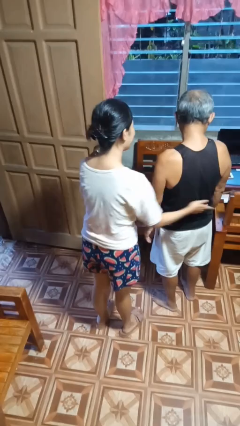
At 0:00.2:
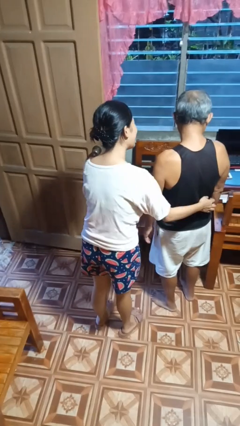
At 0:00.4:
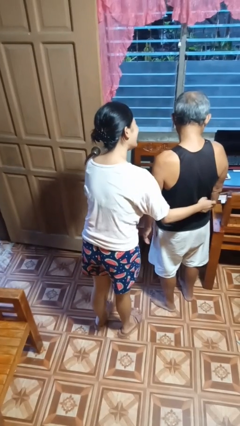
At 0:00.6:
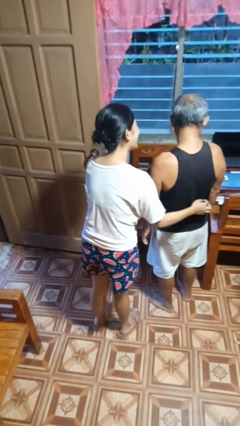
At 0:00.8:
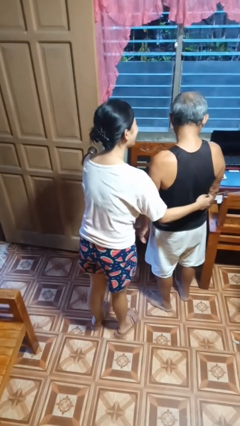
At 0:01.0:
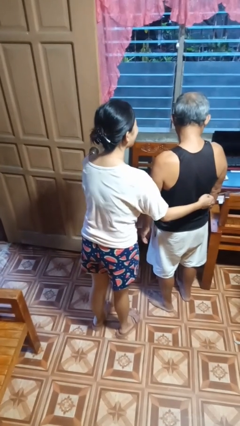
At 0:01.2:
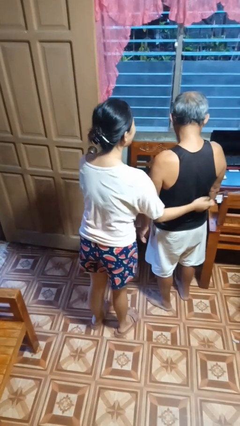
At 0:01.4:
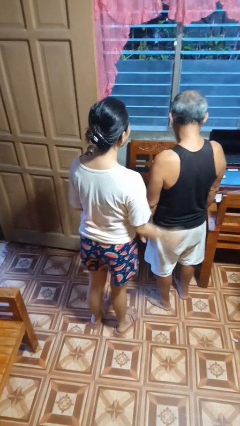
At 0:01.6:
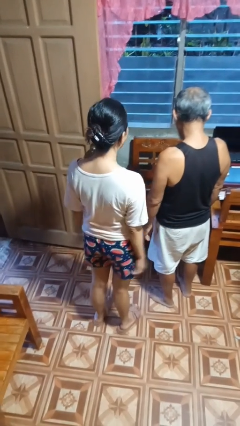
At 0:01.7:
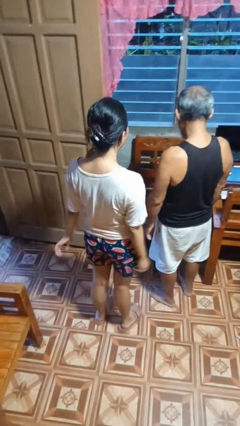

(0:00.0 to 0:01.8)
person tickles person

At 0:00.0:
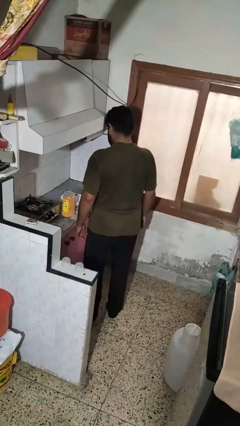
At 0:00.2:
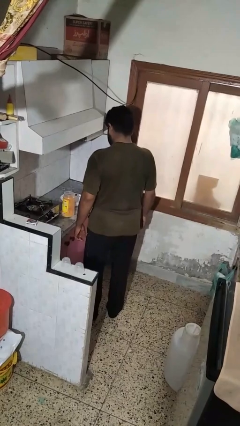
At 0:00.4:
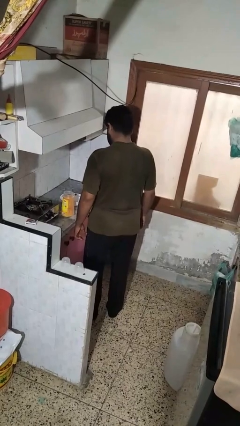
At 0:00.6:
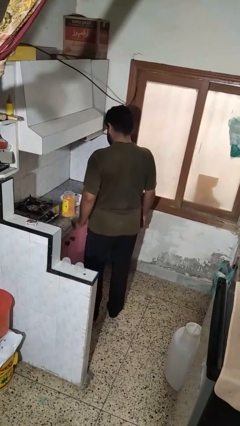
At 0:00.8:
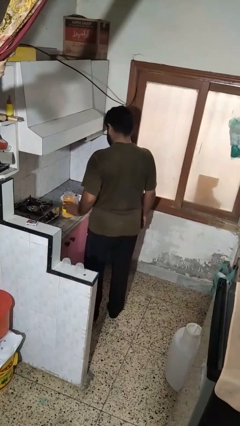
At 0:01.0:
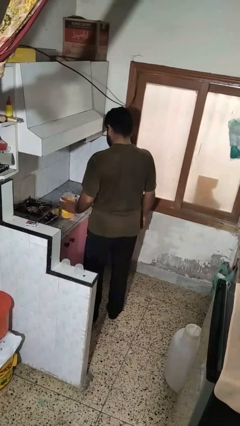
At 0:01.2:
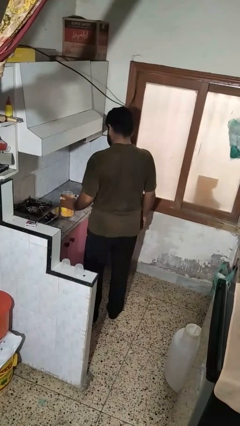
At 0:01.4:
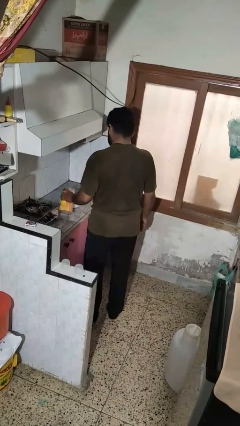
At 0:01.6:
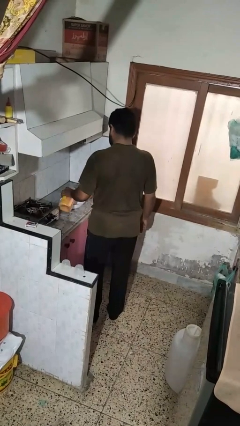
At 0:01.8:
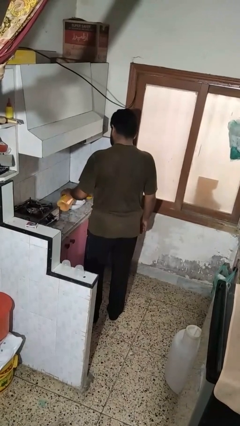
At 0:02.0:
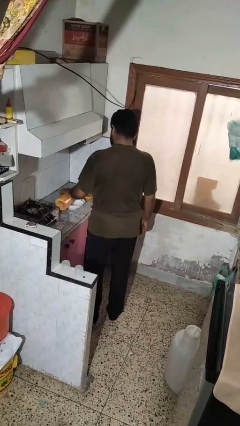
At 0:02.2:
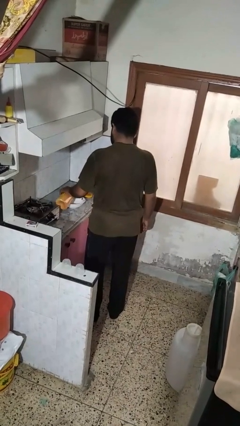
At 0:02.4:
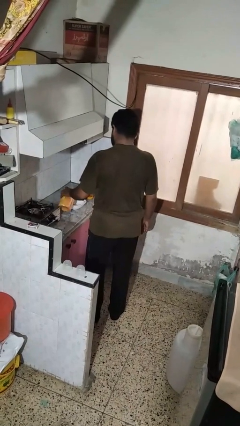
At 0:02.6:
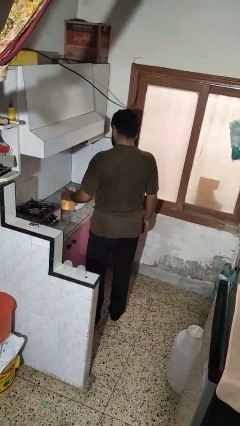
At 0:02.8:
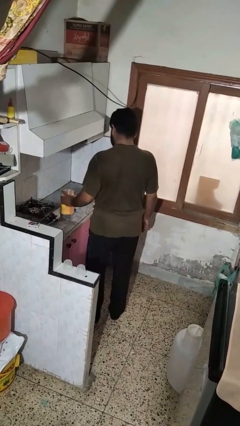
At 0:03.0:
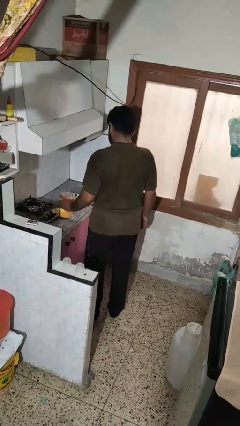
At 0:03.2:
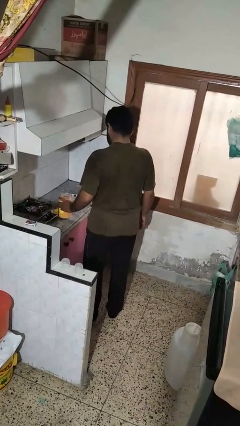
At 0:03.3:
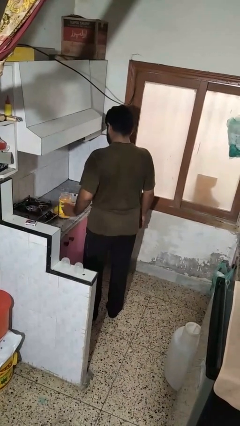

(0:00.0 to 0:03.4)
person pours into bowl

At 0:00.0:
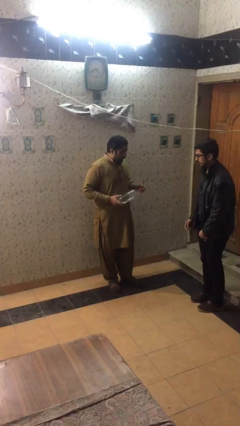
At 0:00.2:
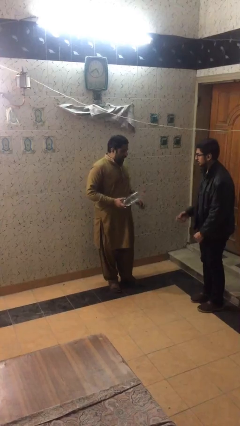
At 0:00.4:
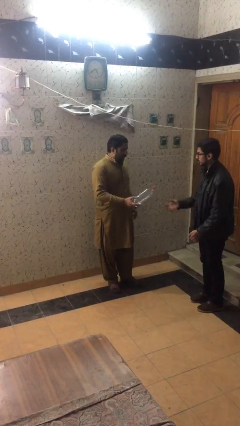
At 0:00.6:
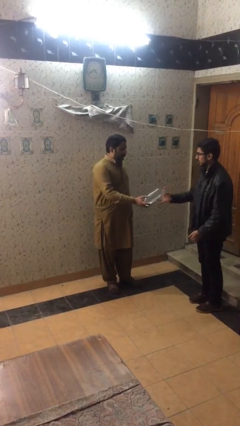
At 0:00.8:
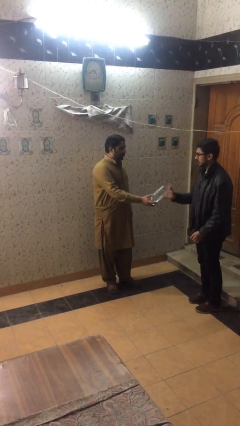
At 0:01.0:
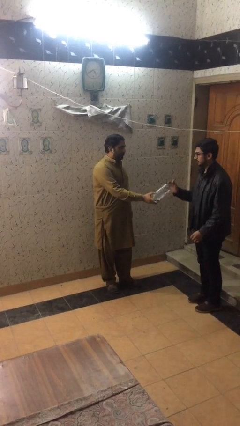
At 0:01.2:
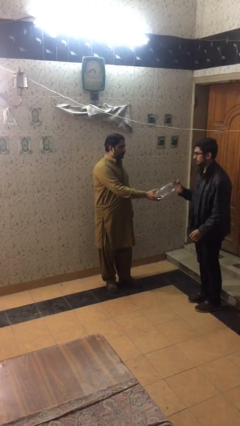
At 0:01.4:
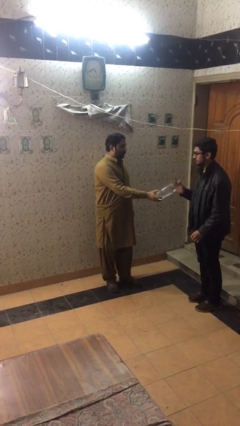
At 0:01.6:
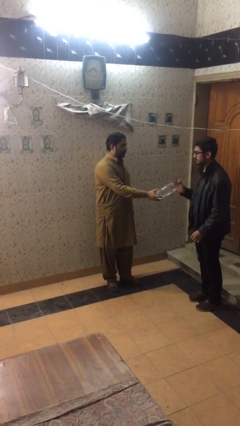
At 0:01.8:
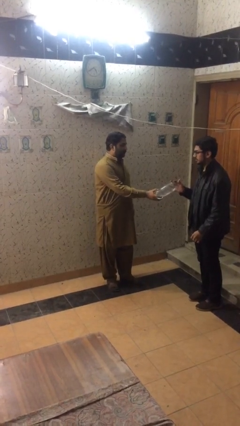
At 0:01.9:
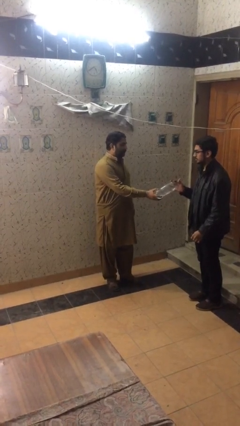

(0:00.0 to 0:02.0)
person transfers object to person

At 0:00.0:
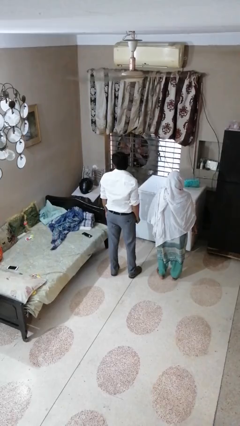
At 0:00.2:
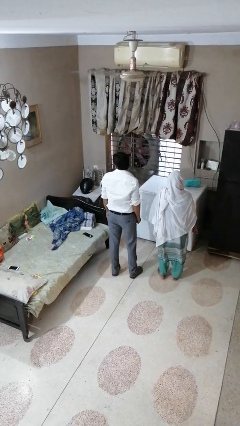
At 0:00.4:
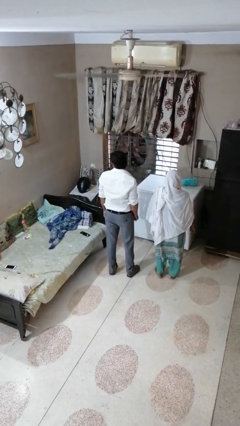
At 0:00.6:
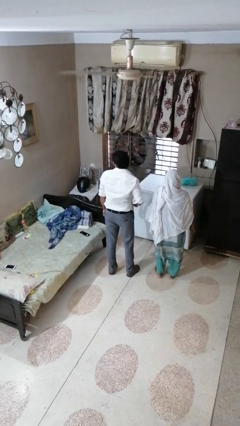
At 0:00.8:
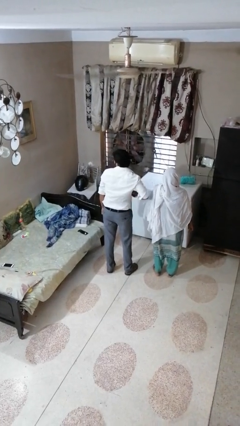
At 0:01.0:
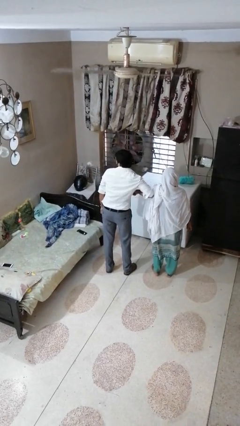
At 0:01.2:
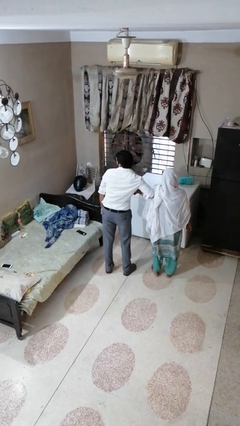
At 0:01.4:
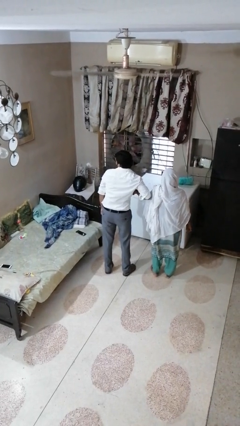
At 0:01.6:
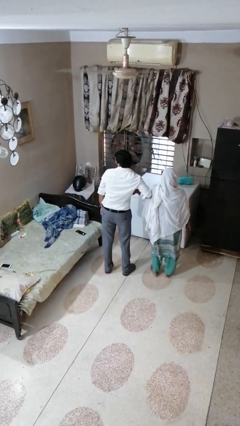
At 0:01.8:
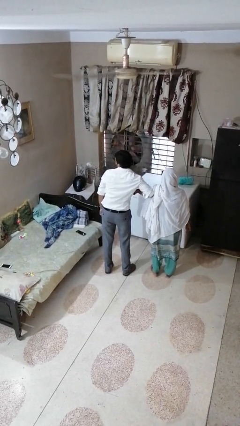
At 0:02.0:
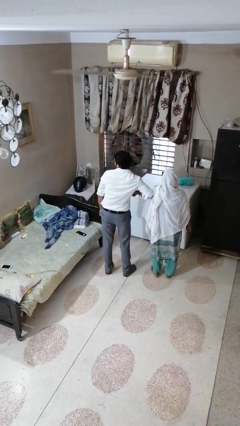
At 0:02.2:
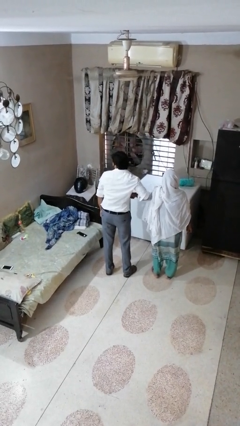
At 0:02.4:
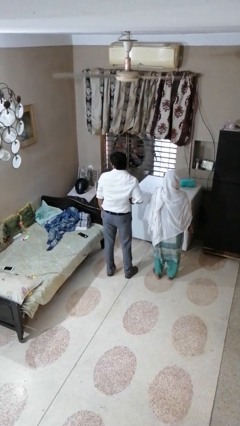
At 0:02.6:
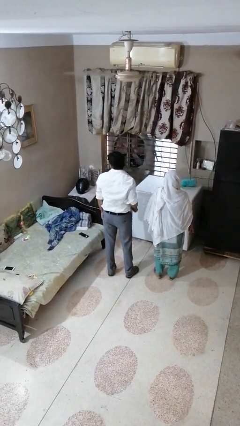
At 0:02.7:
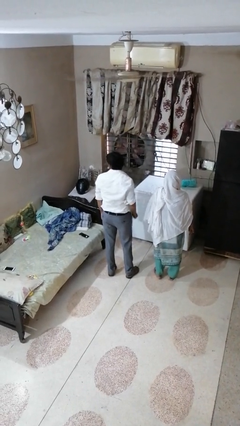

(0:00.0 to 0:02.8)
person nudges person with elbow

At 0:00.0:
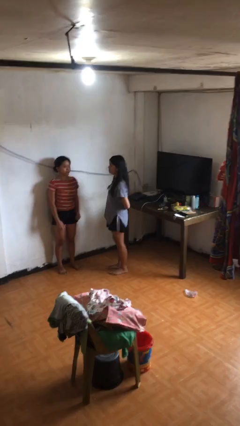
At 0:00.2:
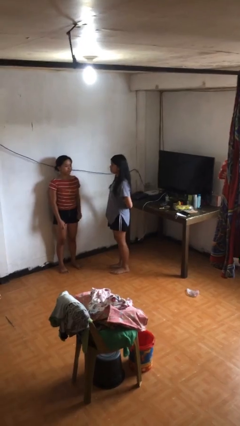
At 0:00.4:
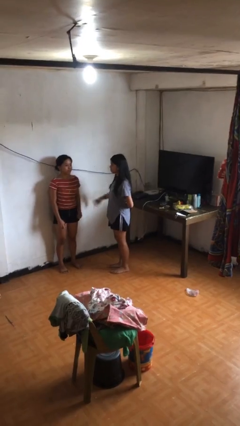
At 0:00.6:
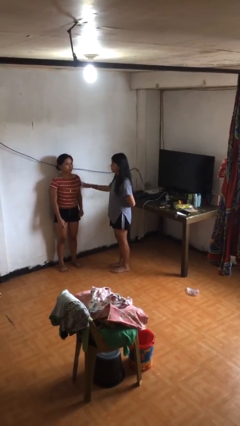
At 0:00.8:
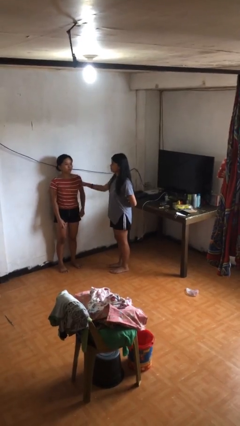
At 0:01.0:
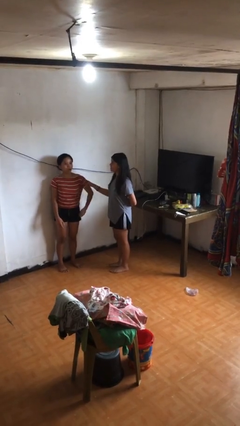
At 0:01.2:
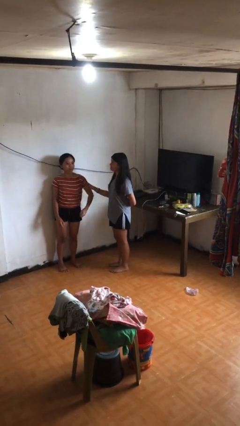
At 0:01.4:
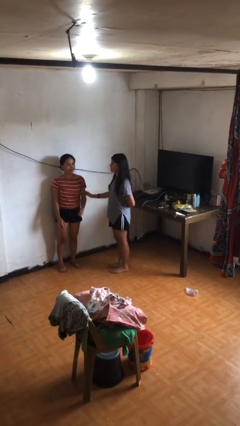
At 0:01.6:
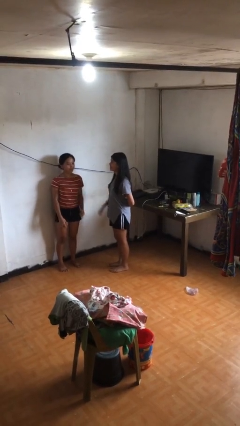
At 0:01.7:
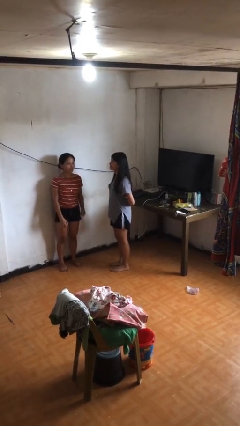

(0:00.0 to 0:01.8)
person grabs person by bicep

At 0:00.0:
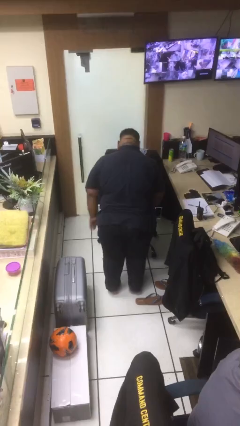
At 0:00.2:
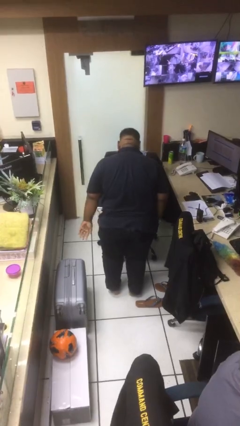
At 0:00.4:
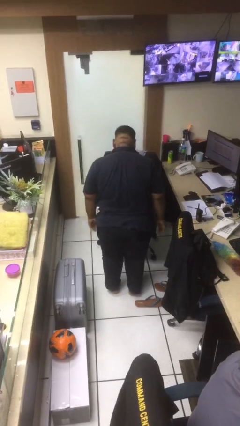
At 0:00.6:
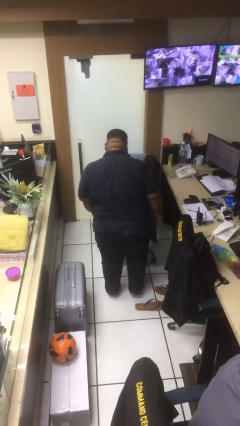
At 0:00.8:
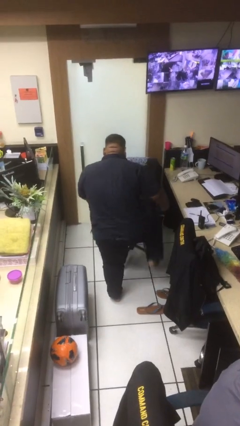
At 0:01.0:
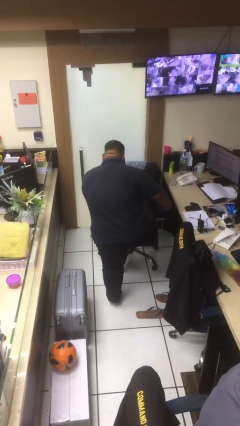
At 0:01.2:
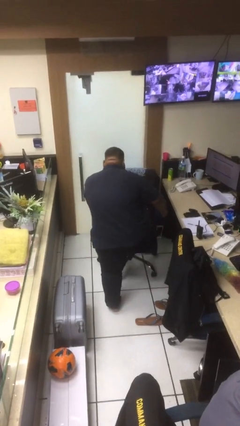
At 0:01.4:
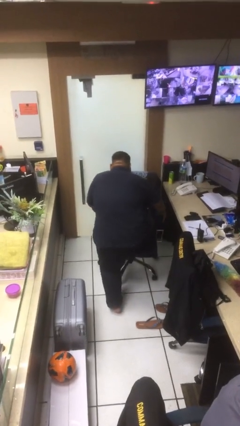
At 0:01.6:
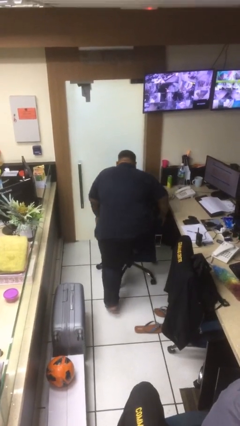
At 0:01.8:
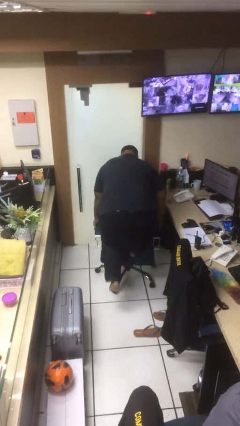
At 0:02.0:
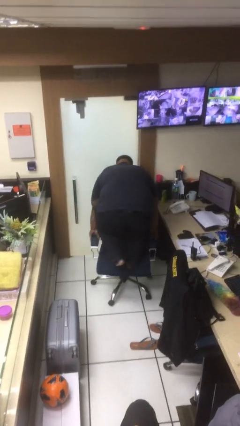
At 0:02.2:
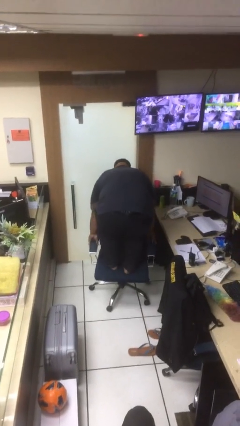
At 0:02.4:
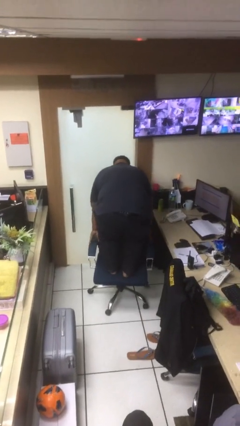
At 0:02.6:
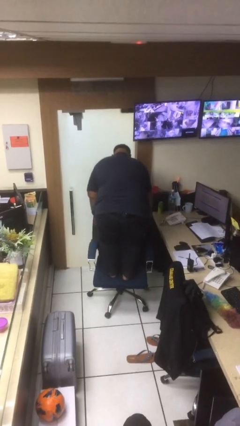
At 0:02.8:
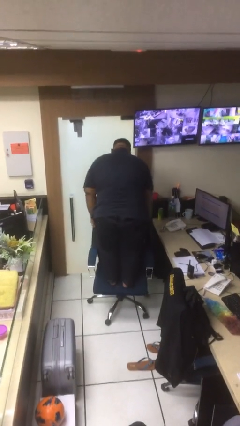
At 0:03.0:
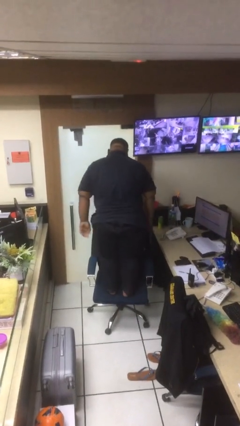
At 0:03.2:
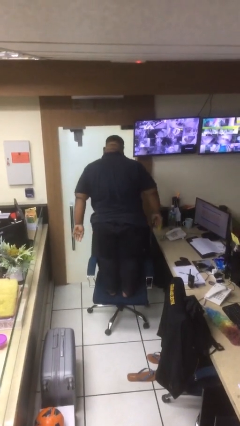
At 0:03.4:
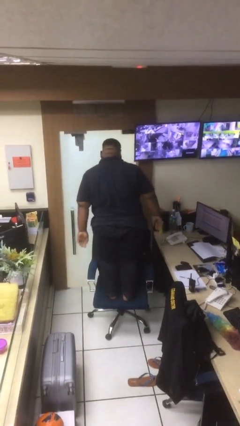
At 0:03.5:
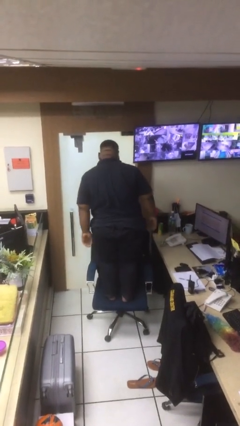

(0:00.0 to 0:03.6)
person climbs on chair

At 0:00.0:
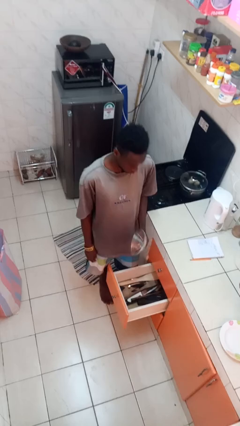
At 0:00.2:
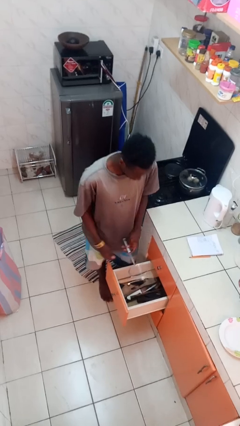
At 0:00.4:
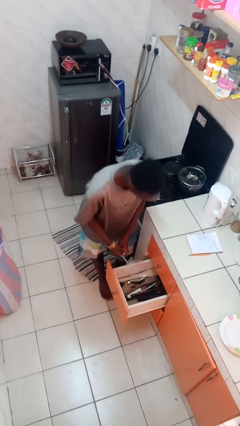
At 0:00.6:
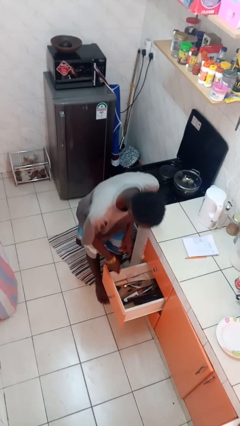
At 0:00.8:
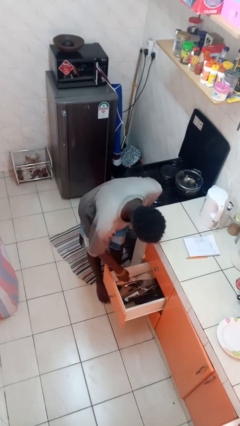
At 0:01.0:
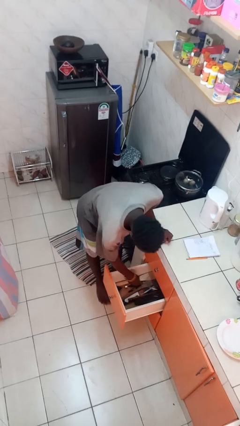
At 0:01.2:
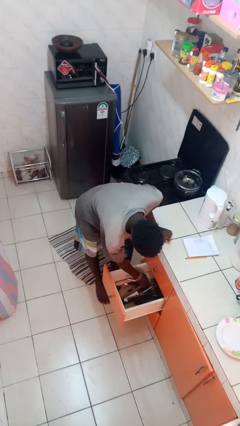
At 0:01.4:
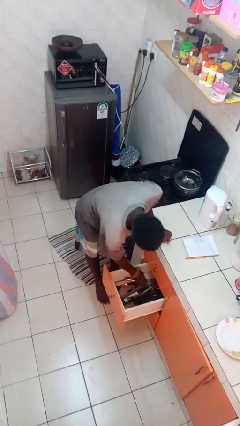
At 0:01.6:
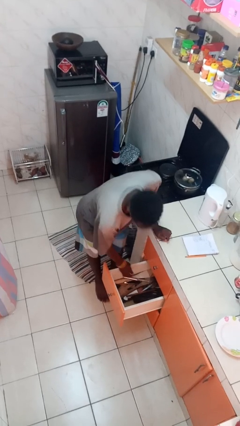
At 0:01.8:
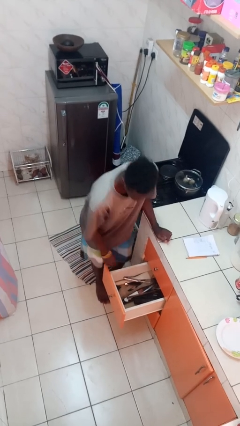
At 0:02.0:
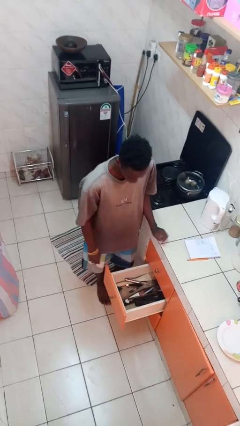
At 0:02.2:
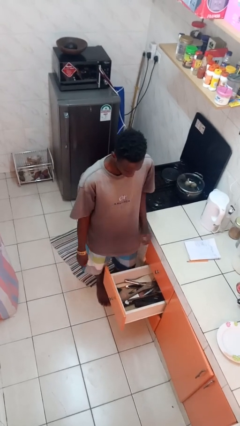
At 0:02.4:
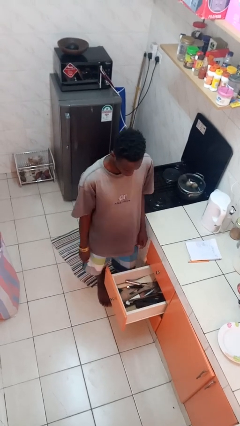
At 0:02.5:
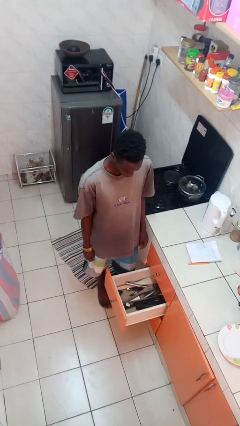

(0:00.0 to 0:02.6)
person puts object into kitchen drawer
